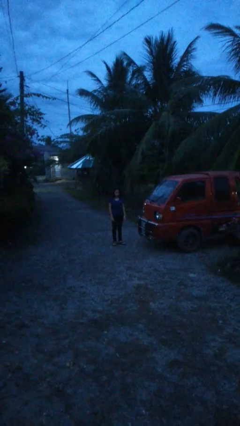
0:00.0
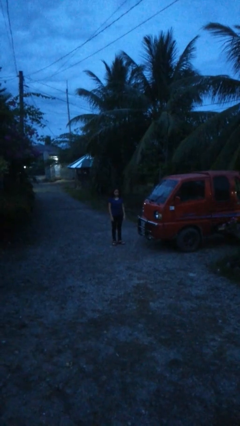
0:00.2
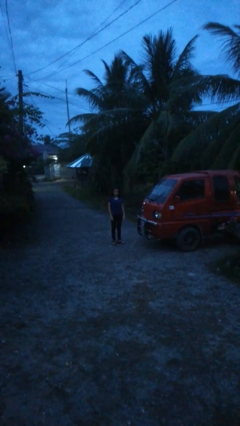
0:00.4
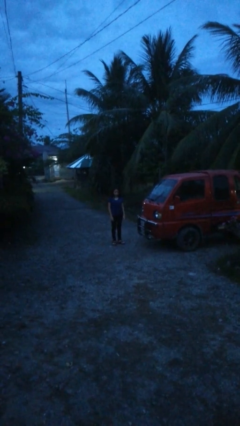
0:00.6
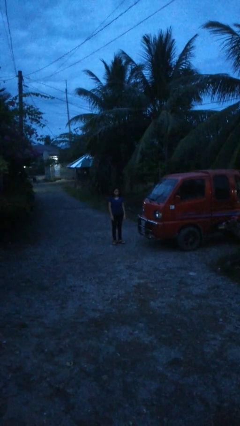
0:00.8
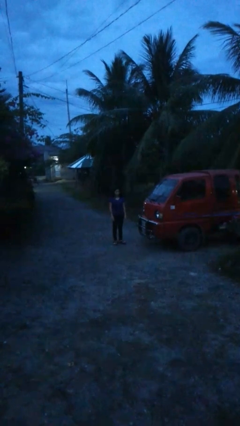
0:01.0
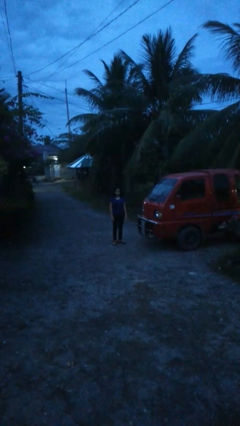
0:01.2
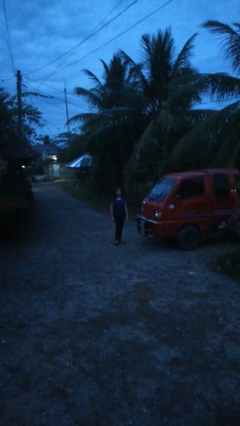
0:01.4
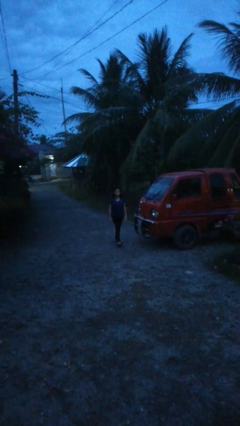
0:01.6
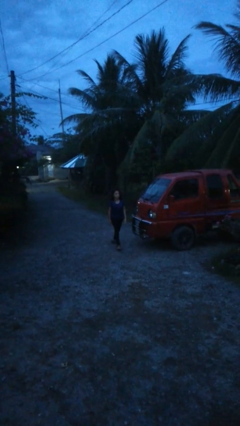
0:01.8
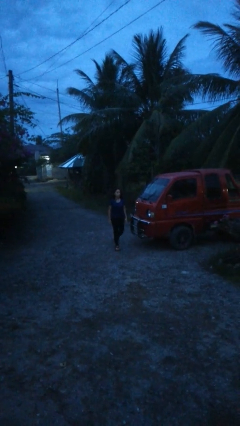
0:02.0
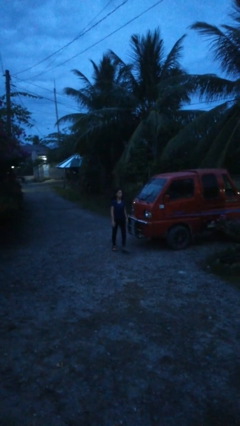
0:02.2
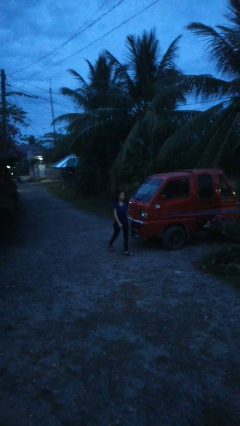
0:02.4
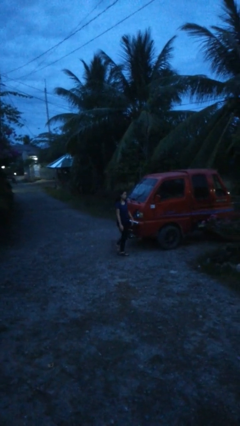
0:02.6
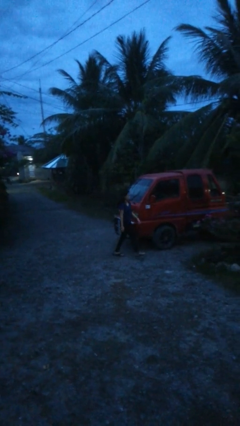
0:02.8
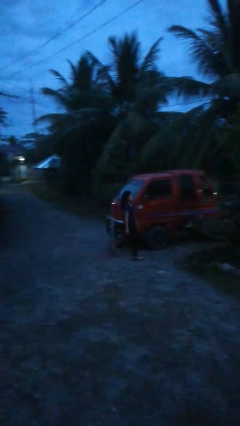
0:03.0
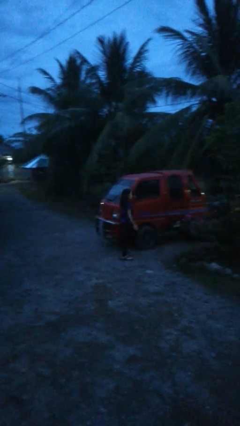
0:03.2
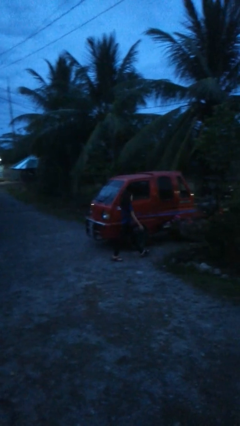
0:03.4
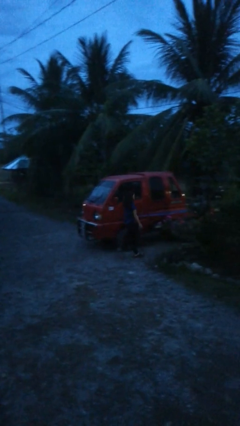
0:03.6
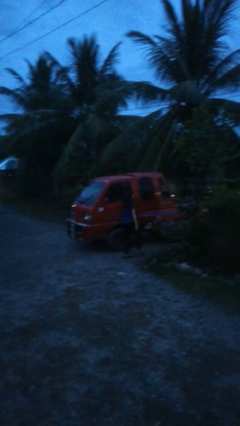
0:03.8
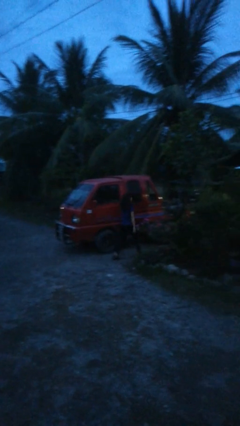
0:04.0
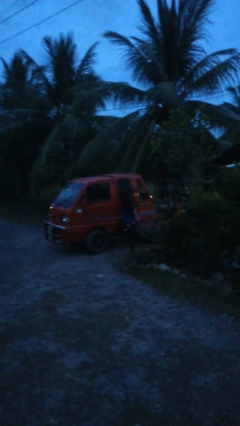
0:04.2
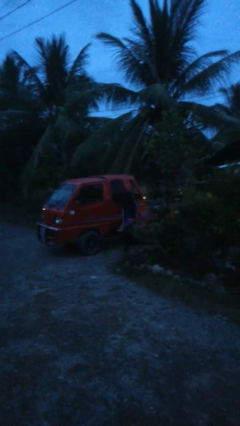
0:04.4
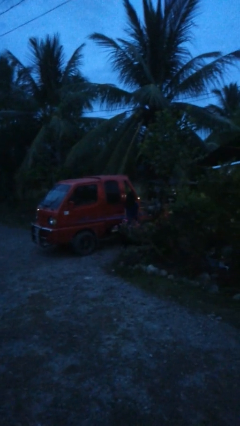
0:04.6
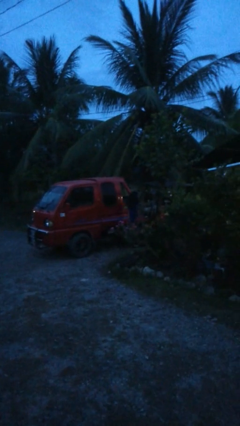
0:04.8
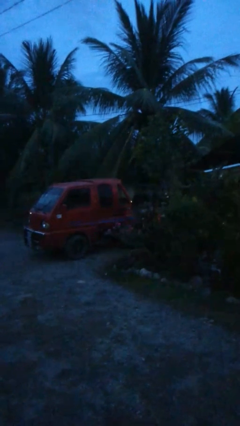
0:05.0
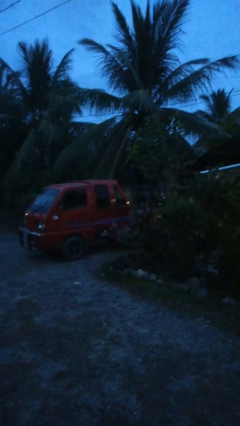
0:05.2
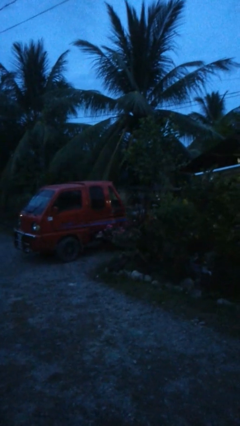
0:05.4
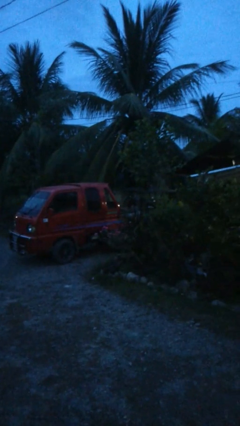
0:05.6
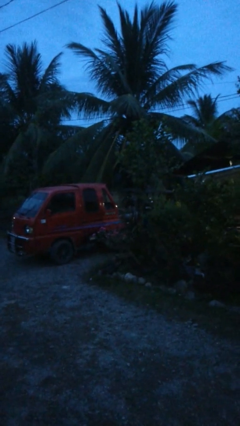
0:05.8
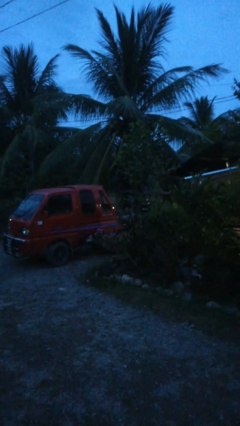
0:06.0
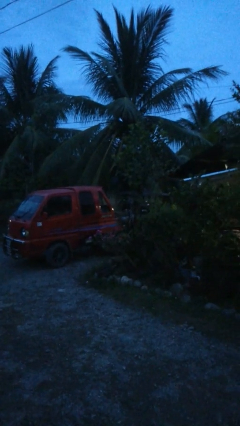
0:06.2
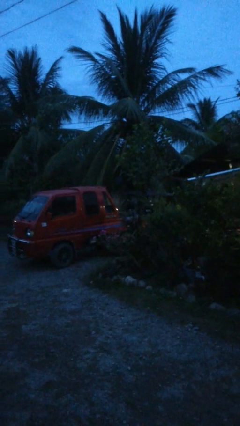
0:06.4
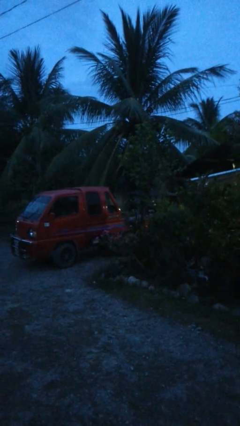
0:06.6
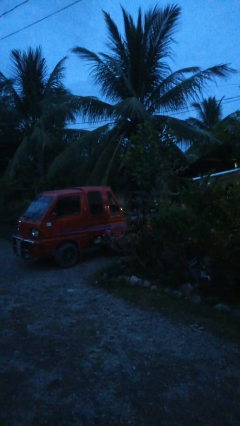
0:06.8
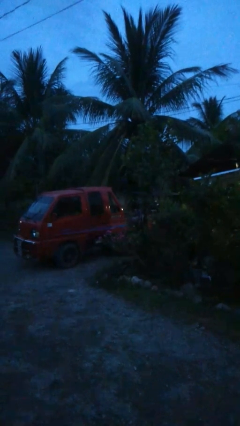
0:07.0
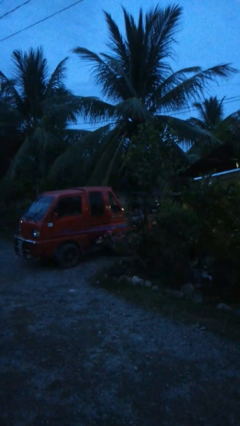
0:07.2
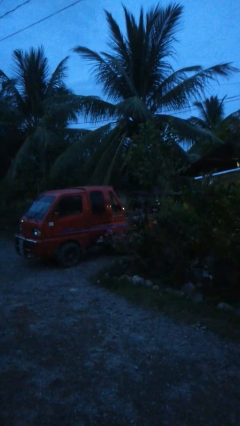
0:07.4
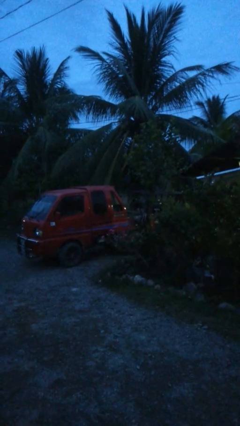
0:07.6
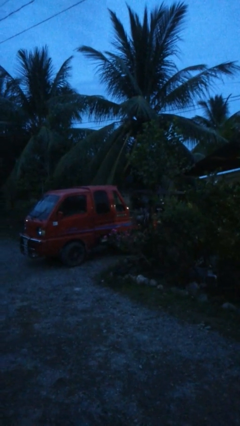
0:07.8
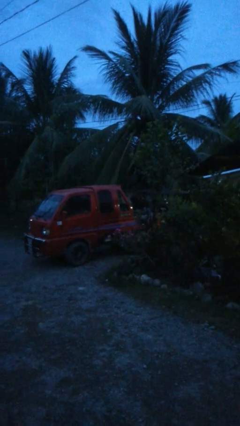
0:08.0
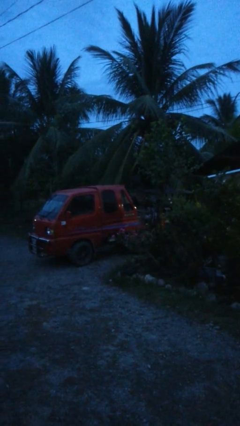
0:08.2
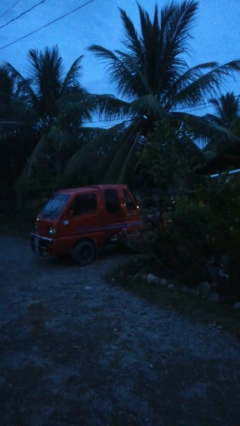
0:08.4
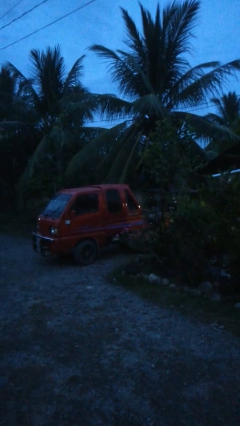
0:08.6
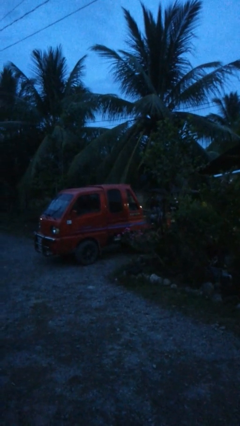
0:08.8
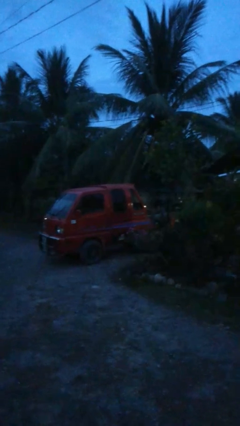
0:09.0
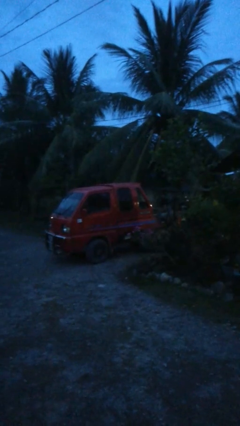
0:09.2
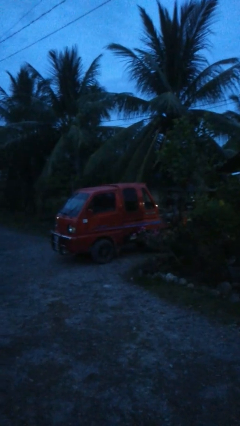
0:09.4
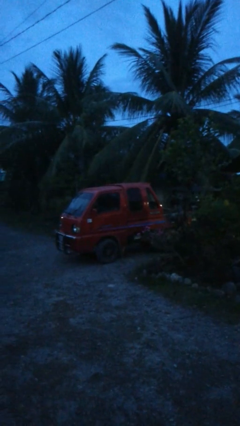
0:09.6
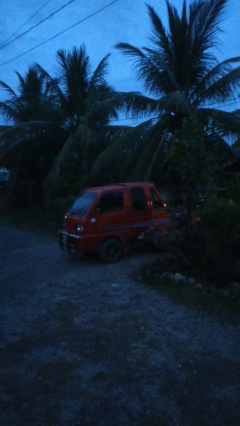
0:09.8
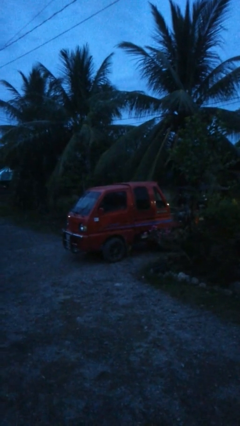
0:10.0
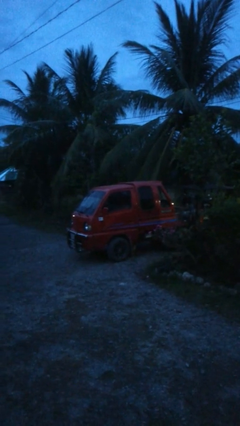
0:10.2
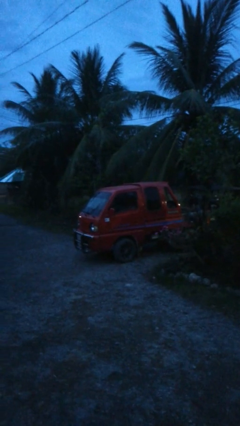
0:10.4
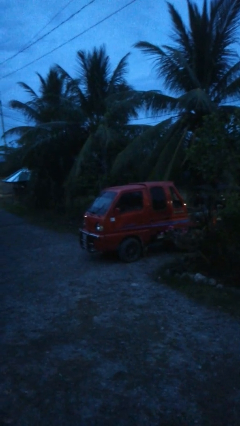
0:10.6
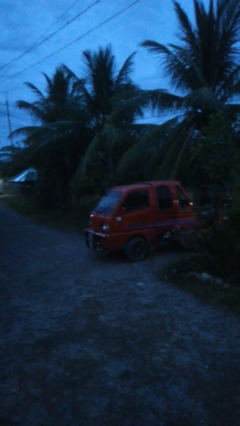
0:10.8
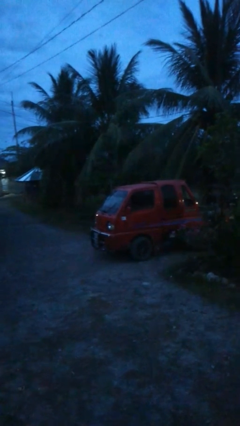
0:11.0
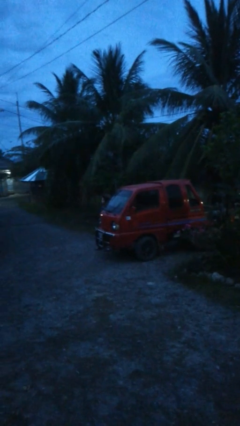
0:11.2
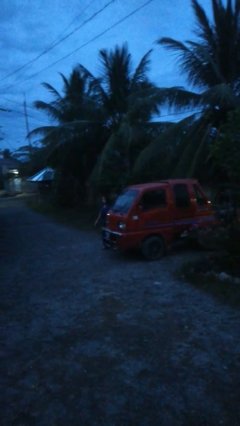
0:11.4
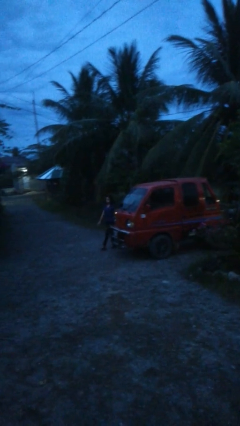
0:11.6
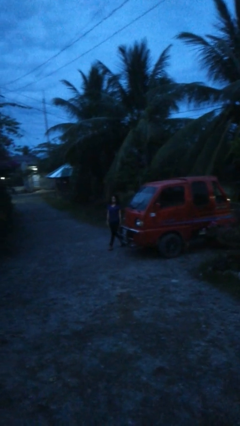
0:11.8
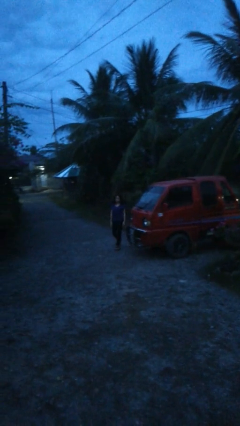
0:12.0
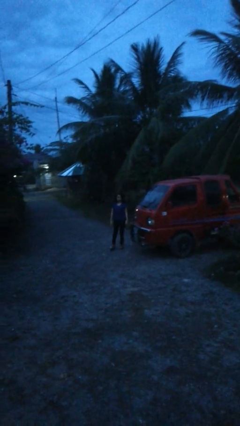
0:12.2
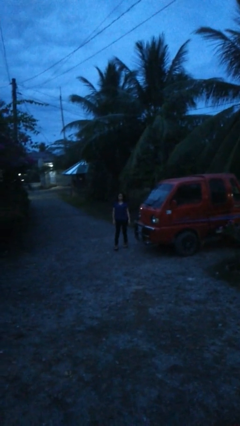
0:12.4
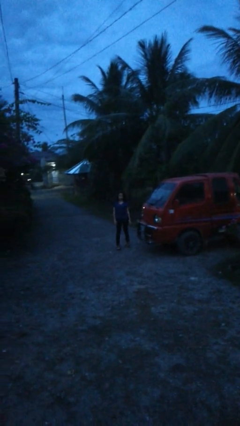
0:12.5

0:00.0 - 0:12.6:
person walks around car

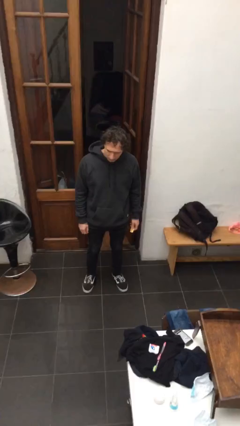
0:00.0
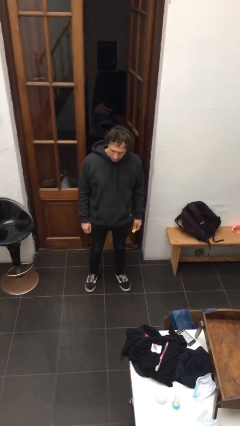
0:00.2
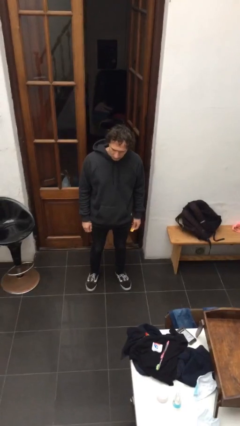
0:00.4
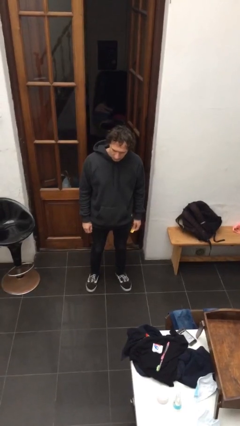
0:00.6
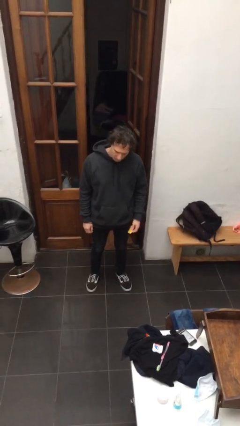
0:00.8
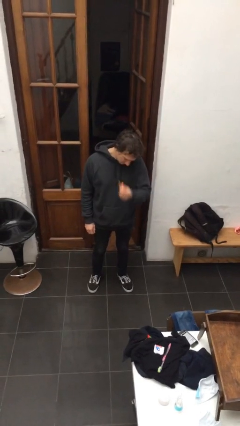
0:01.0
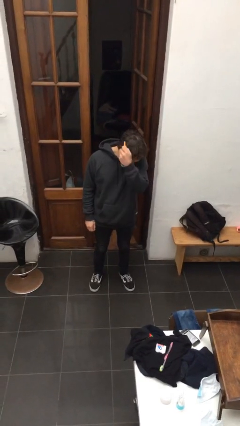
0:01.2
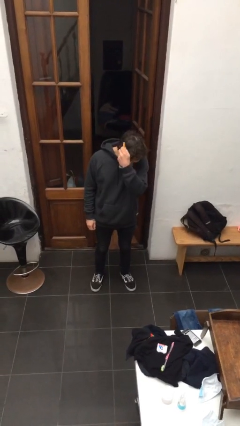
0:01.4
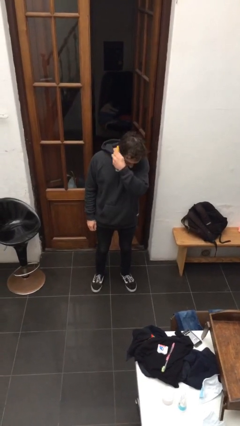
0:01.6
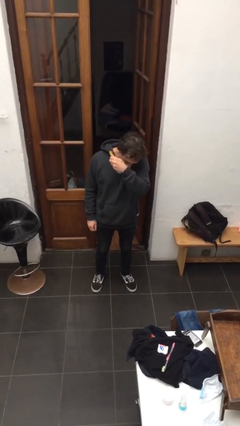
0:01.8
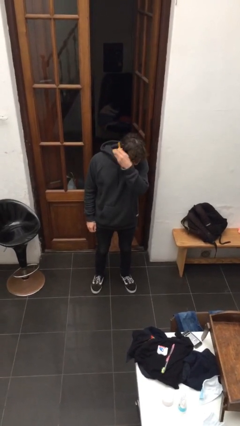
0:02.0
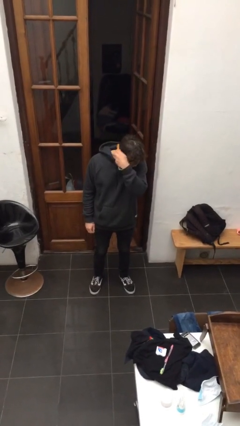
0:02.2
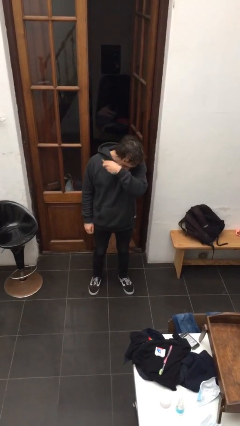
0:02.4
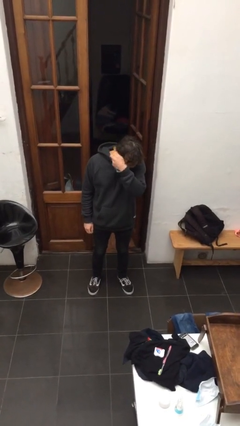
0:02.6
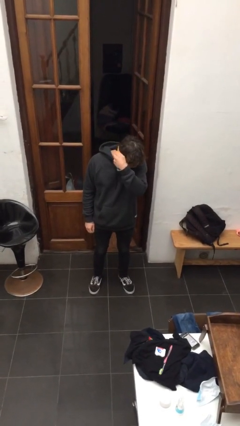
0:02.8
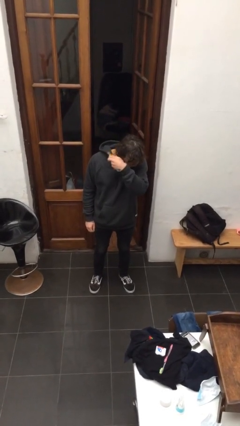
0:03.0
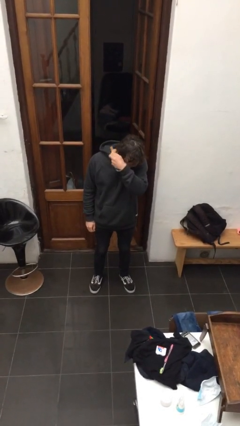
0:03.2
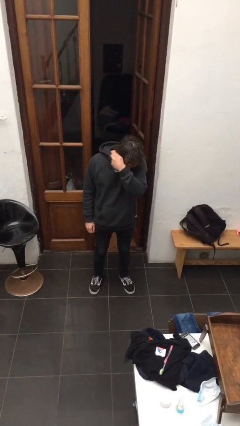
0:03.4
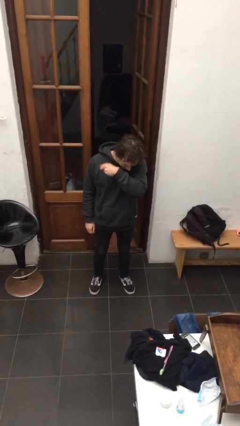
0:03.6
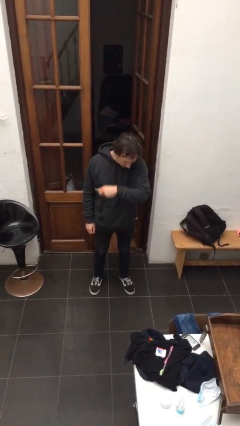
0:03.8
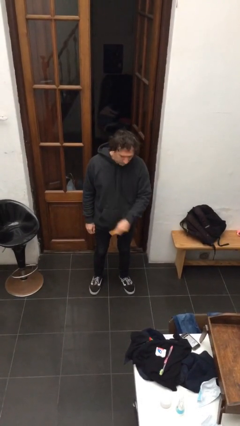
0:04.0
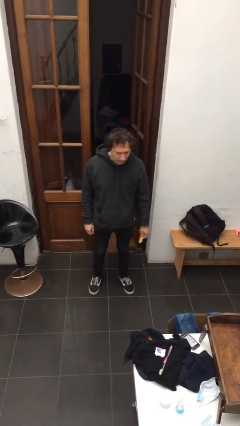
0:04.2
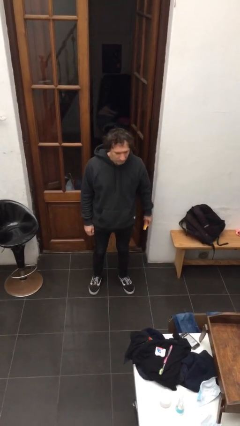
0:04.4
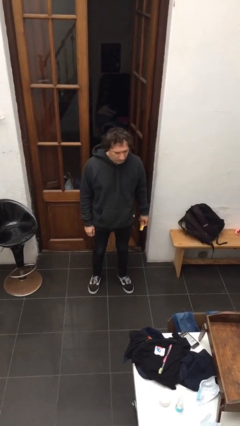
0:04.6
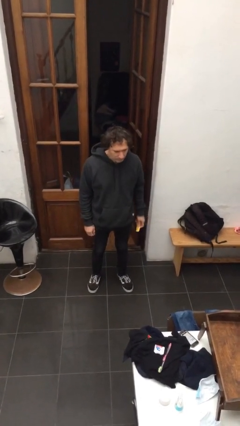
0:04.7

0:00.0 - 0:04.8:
person brushes hair

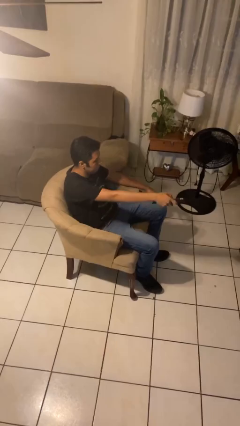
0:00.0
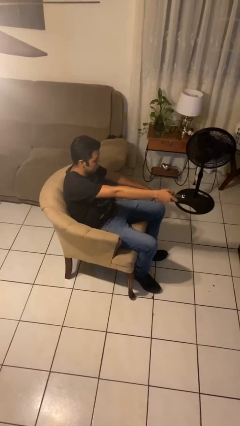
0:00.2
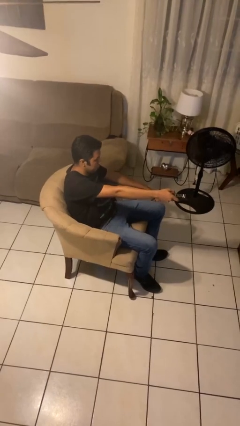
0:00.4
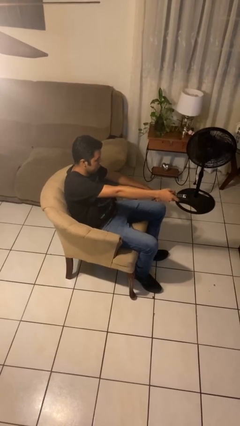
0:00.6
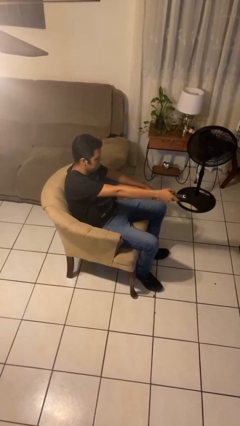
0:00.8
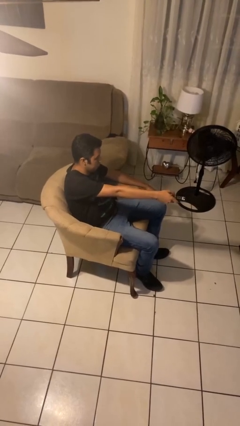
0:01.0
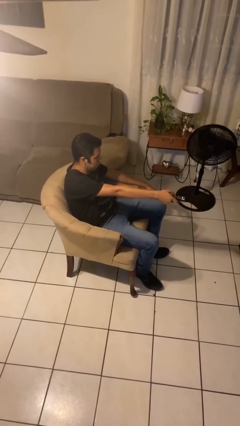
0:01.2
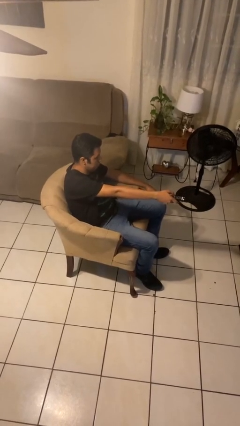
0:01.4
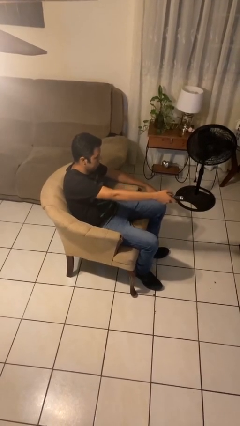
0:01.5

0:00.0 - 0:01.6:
person uses television remote
